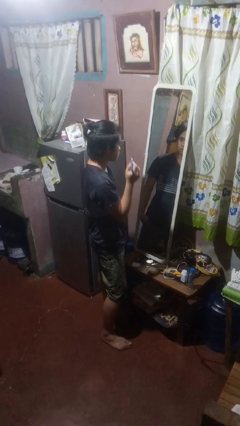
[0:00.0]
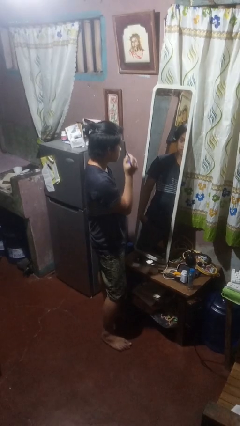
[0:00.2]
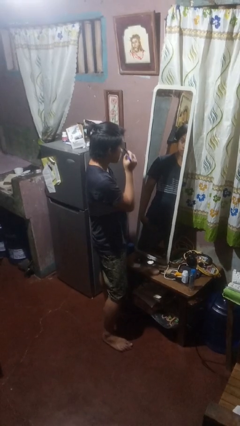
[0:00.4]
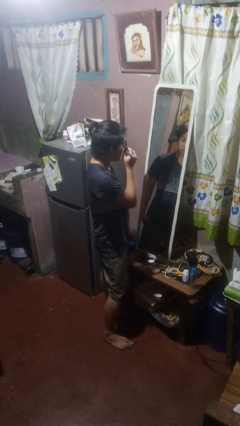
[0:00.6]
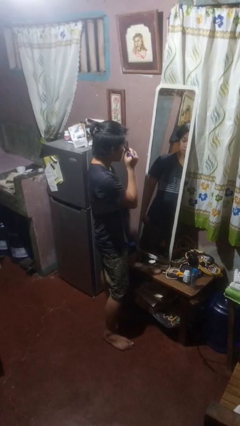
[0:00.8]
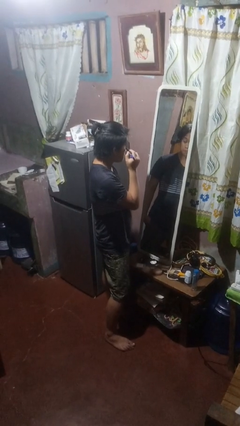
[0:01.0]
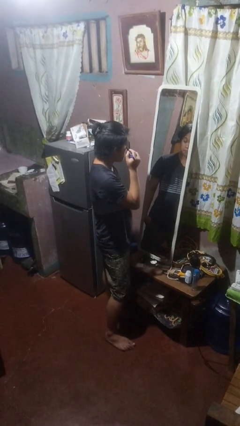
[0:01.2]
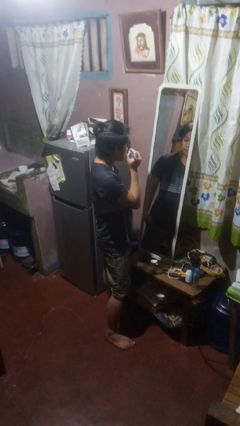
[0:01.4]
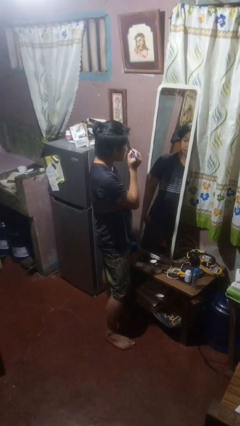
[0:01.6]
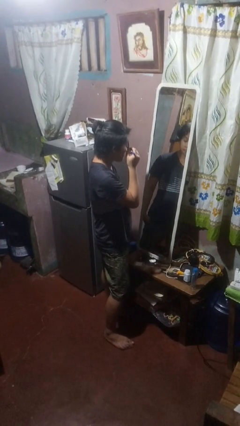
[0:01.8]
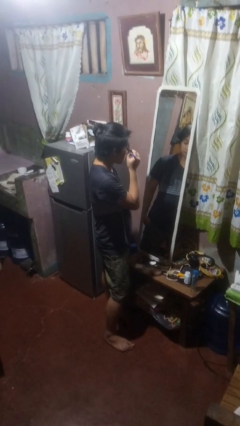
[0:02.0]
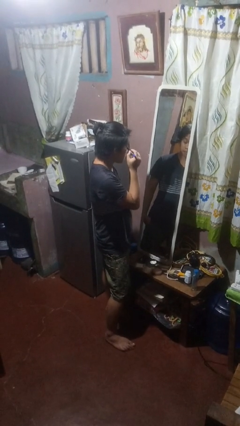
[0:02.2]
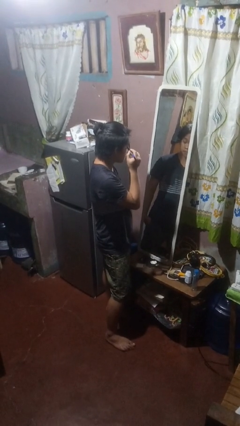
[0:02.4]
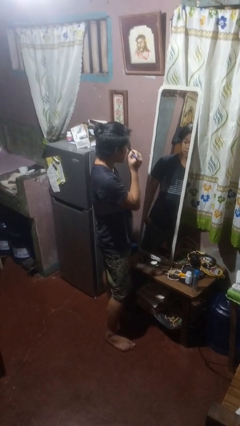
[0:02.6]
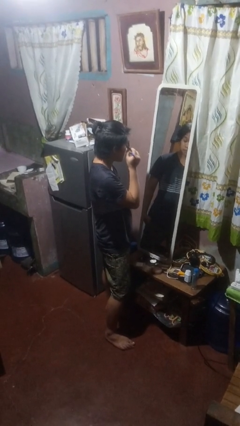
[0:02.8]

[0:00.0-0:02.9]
person applies eye makeup

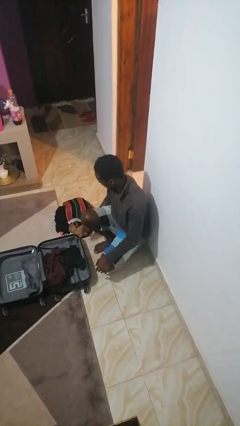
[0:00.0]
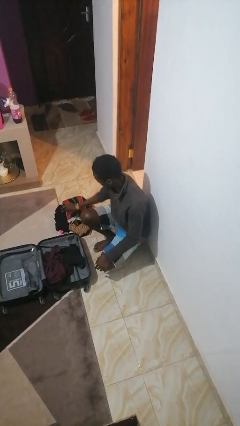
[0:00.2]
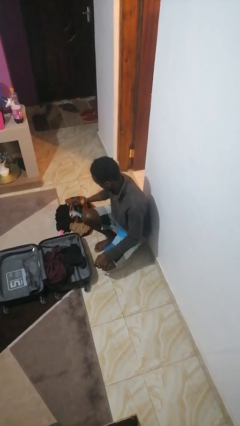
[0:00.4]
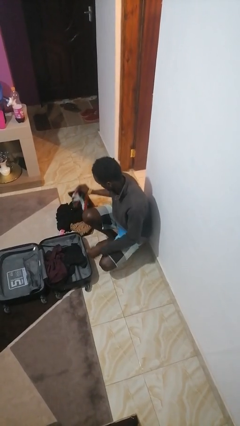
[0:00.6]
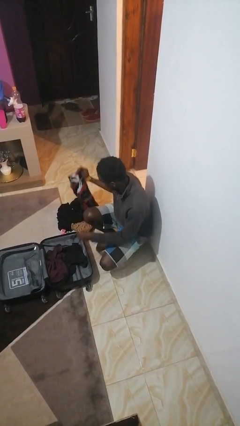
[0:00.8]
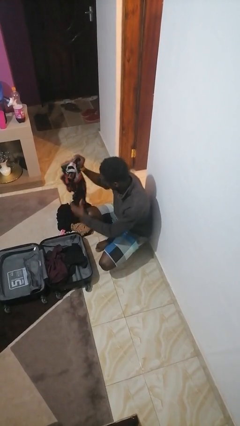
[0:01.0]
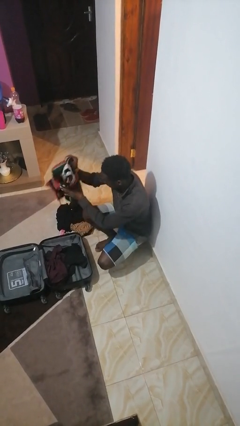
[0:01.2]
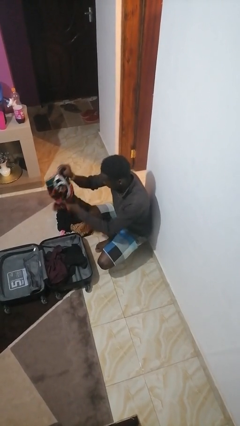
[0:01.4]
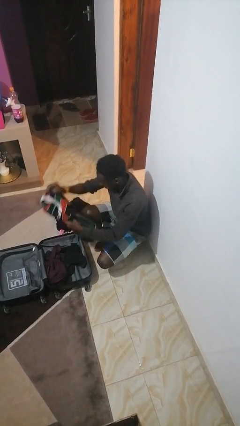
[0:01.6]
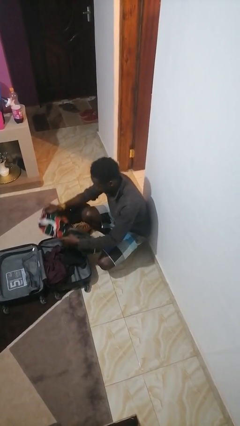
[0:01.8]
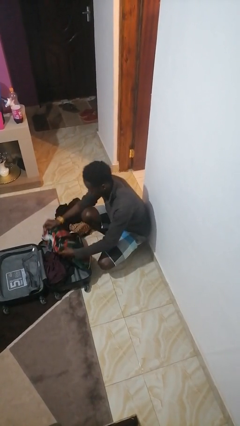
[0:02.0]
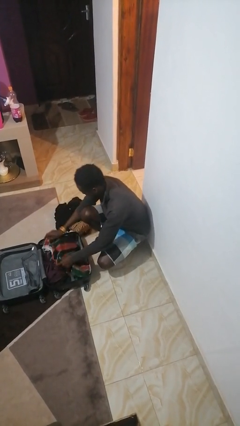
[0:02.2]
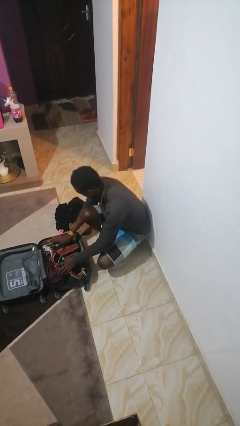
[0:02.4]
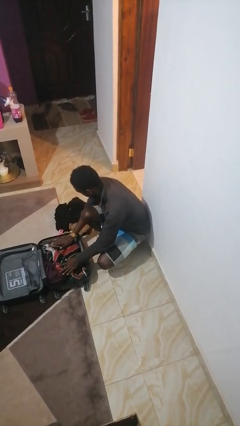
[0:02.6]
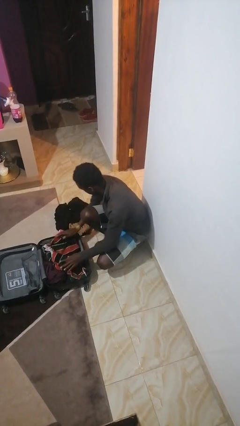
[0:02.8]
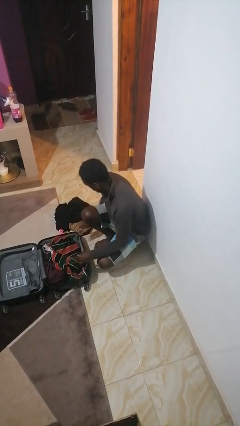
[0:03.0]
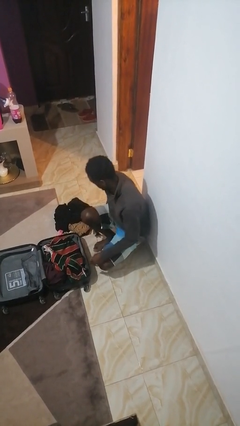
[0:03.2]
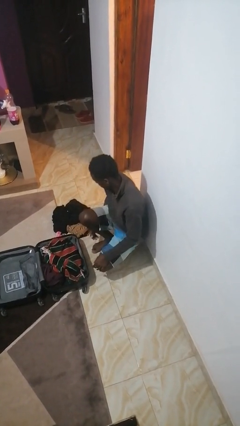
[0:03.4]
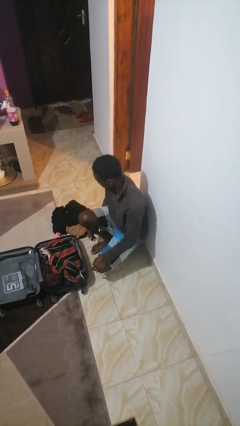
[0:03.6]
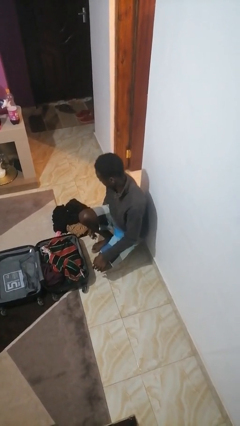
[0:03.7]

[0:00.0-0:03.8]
person loads clothes into suitcase

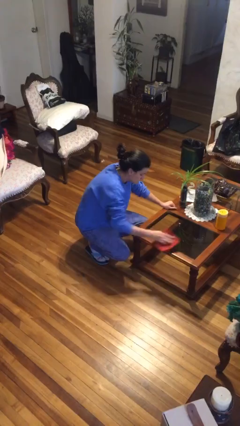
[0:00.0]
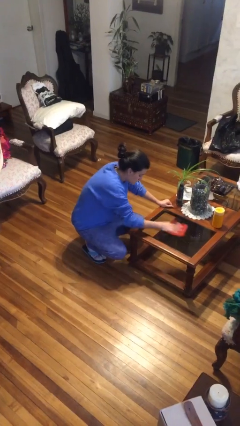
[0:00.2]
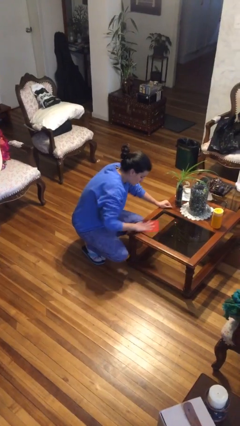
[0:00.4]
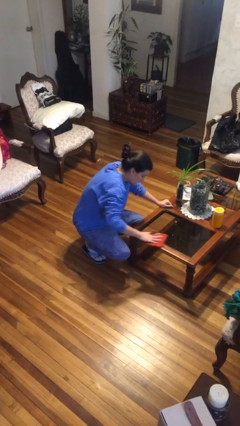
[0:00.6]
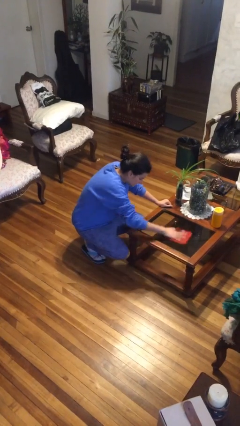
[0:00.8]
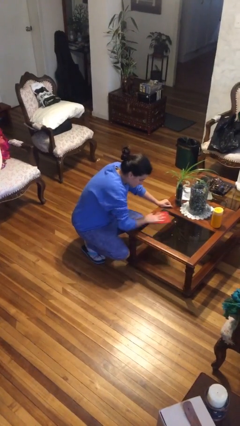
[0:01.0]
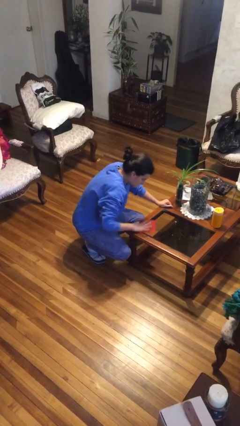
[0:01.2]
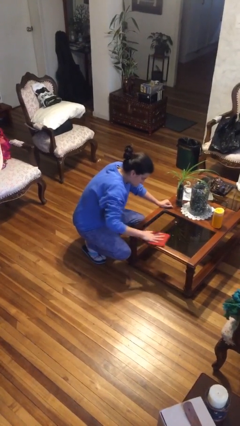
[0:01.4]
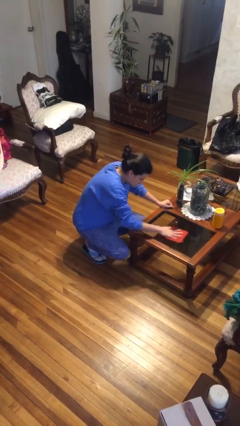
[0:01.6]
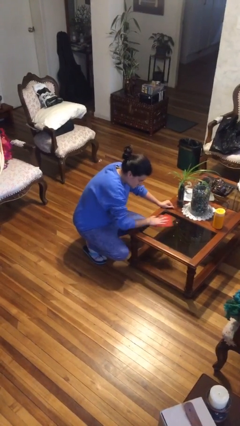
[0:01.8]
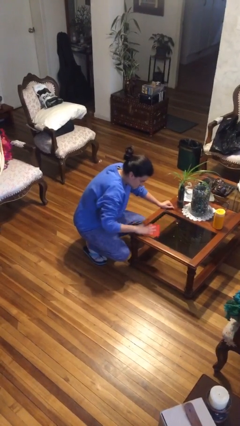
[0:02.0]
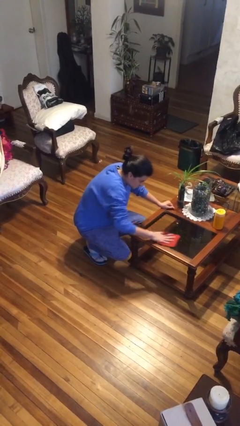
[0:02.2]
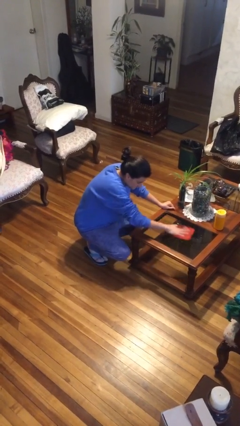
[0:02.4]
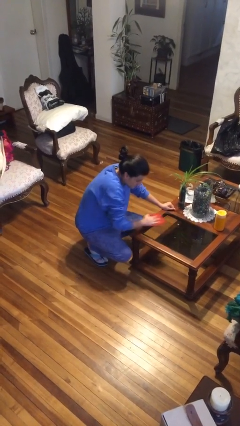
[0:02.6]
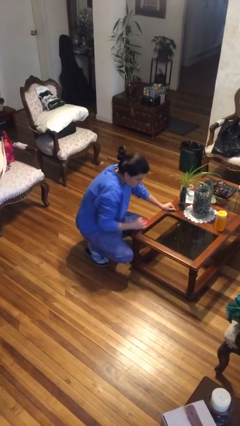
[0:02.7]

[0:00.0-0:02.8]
person cleans table with rag

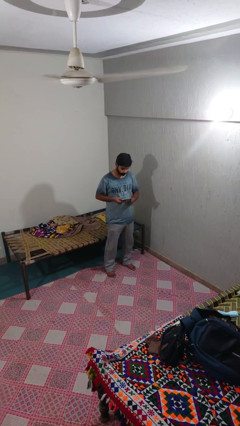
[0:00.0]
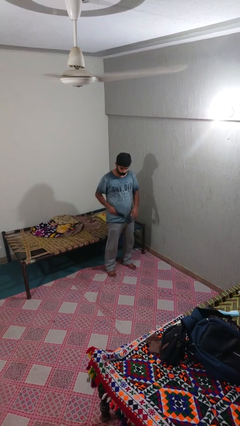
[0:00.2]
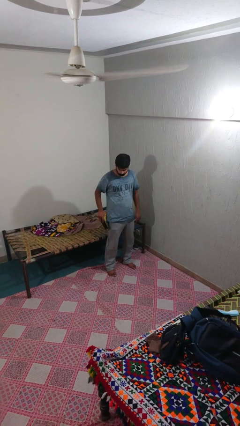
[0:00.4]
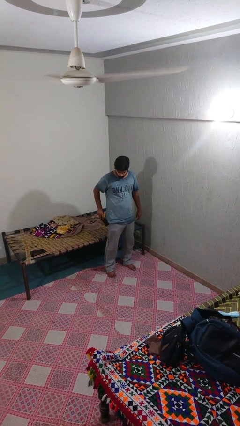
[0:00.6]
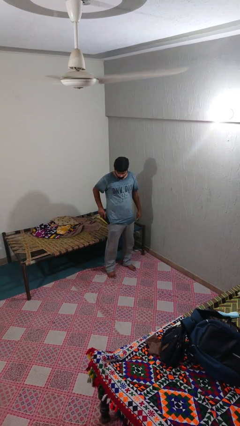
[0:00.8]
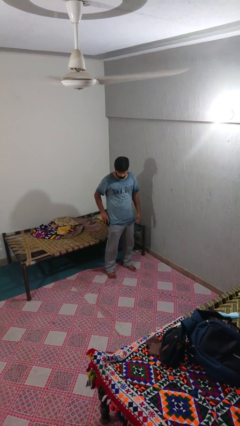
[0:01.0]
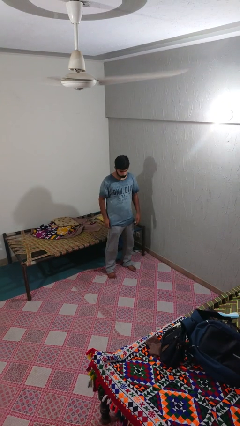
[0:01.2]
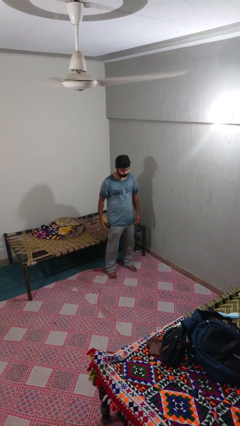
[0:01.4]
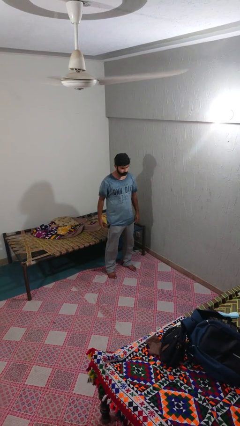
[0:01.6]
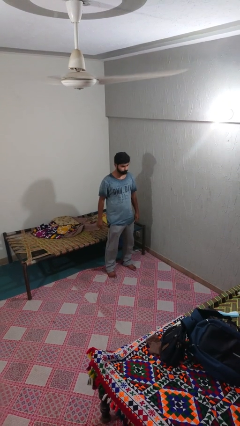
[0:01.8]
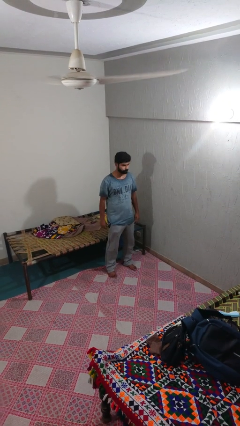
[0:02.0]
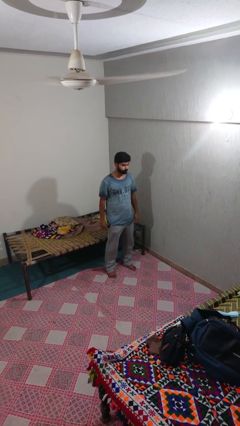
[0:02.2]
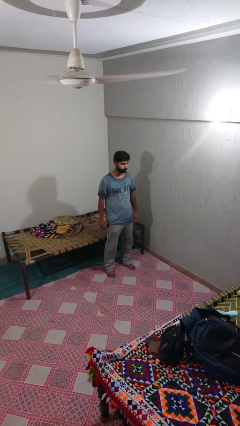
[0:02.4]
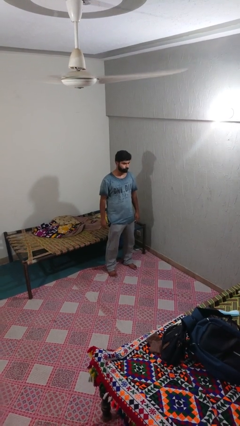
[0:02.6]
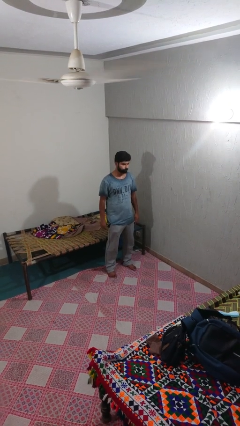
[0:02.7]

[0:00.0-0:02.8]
person puts phone into pocket

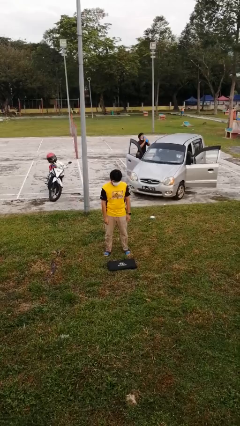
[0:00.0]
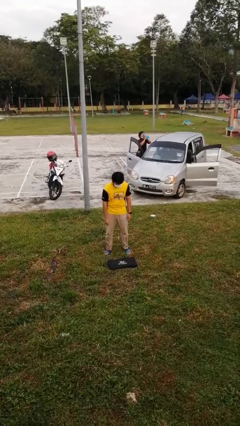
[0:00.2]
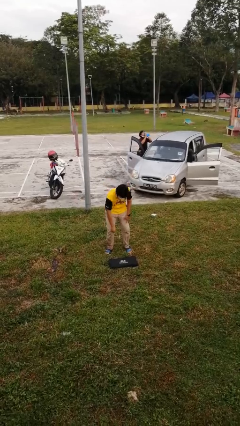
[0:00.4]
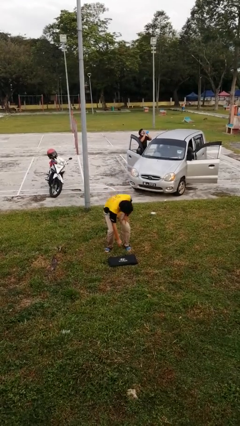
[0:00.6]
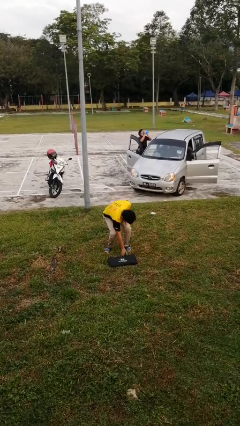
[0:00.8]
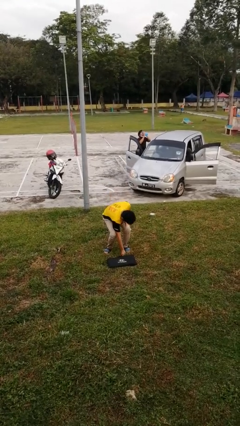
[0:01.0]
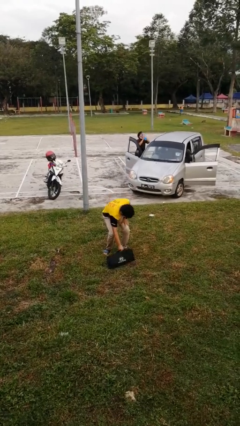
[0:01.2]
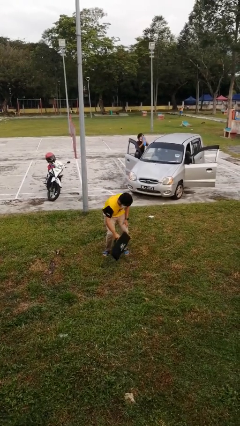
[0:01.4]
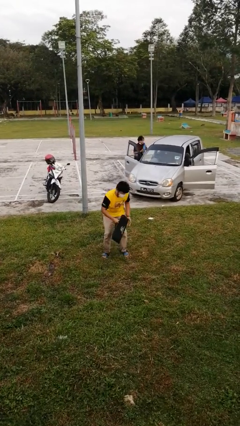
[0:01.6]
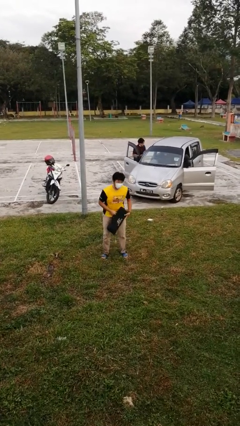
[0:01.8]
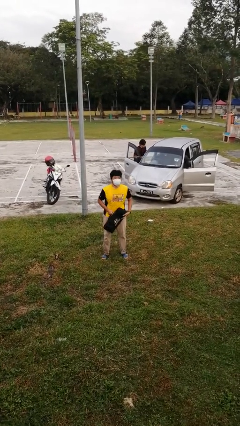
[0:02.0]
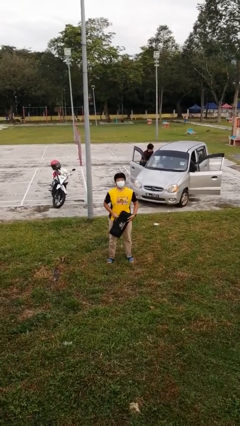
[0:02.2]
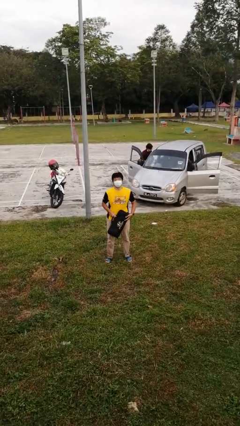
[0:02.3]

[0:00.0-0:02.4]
person picks up object from floor

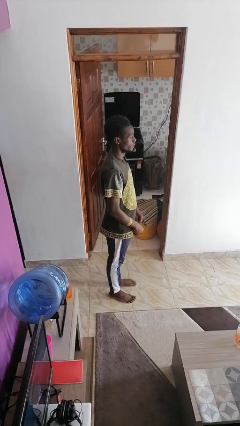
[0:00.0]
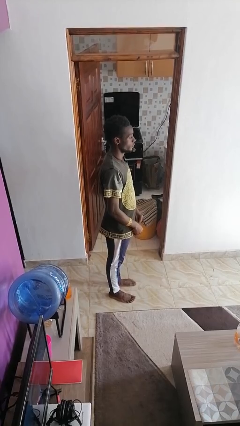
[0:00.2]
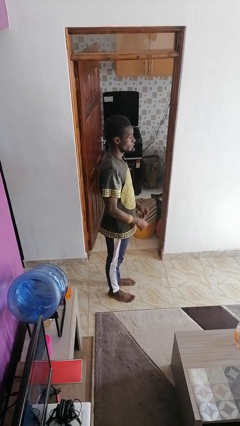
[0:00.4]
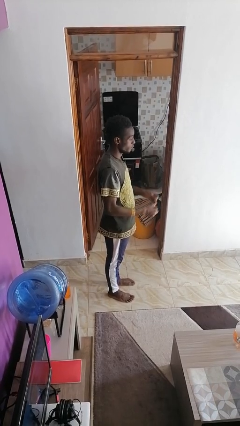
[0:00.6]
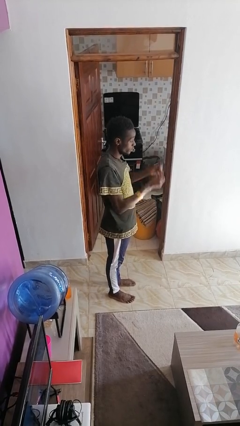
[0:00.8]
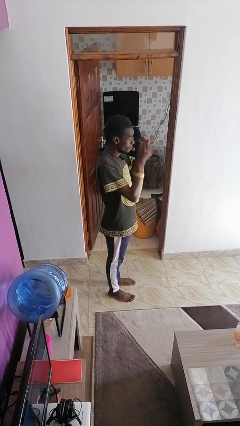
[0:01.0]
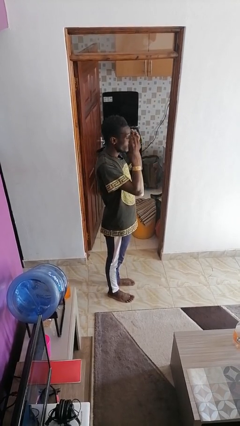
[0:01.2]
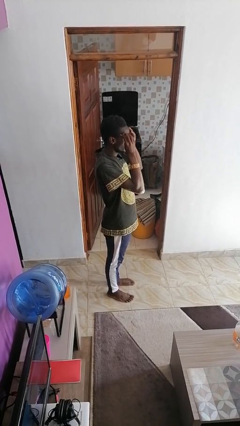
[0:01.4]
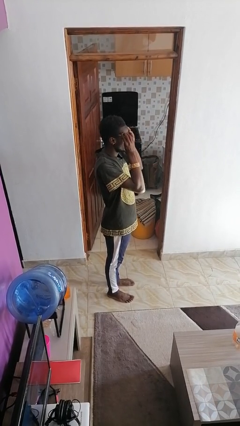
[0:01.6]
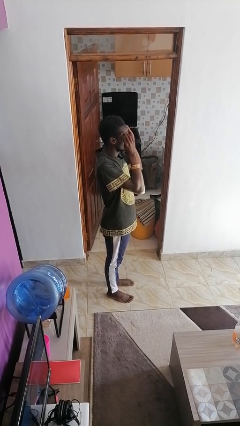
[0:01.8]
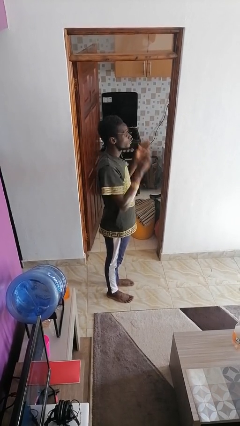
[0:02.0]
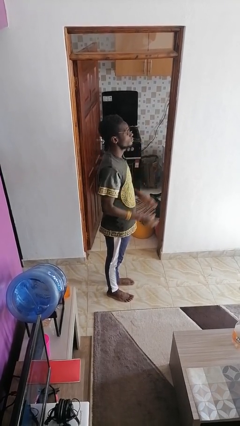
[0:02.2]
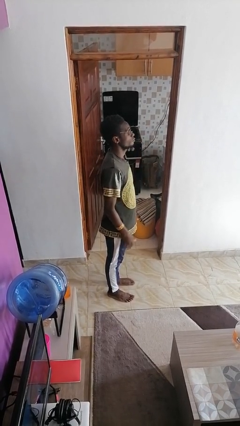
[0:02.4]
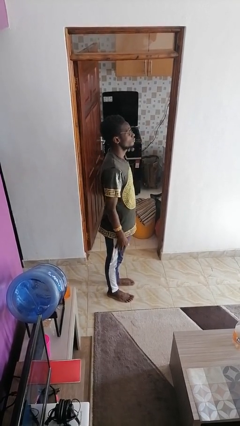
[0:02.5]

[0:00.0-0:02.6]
person puts on glasses
